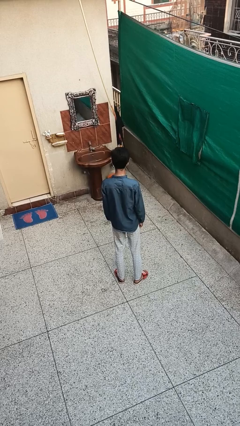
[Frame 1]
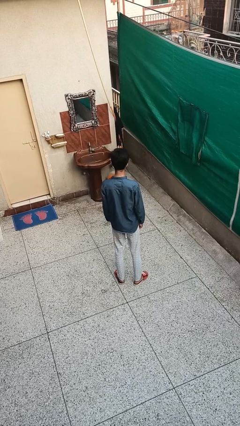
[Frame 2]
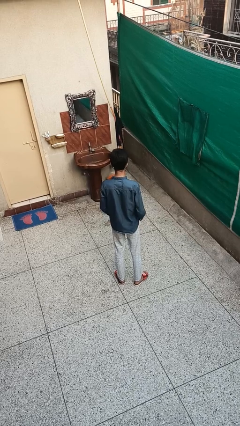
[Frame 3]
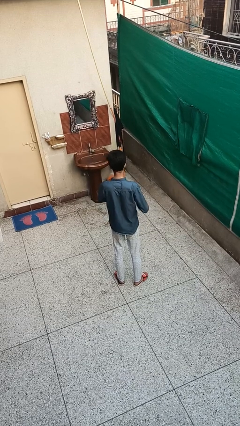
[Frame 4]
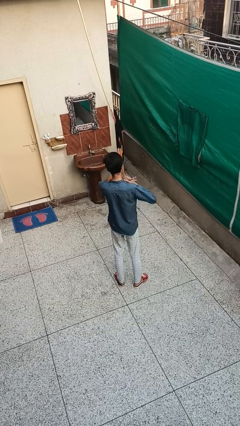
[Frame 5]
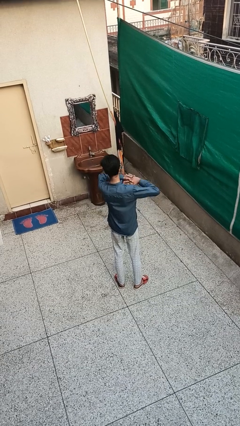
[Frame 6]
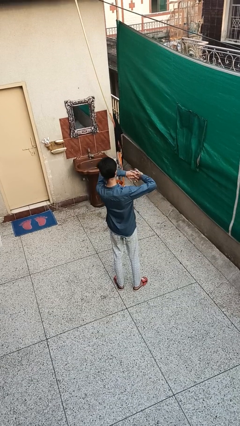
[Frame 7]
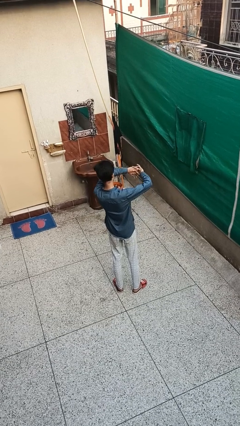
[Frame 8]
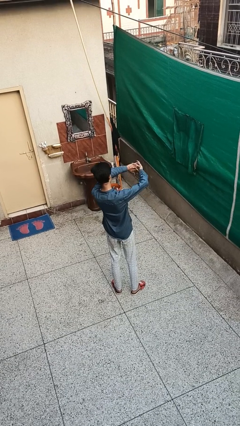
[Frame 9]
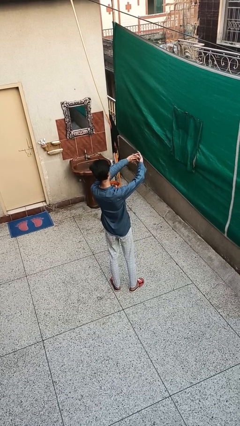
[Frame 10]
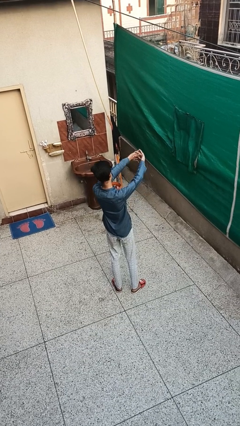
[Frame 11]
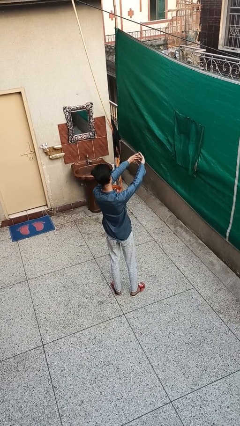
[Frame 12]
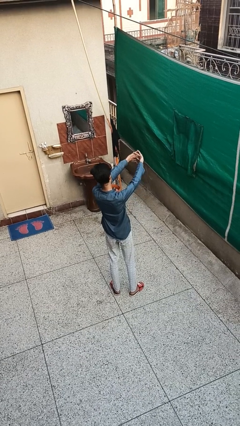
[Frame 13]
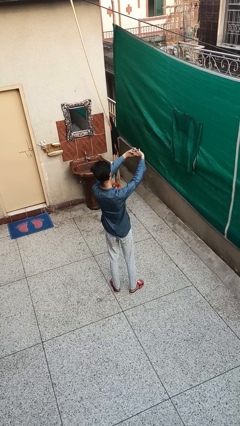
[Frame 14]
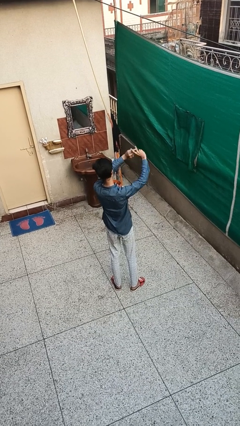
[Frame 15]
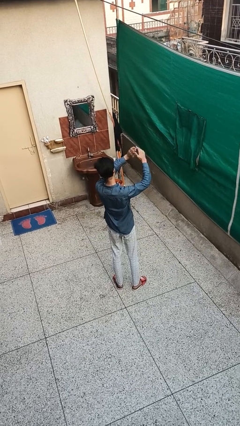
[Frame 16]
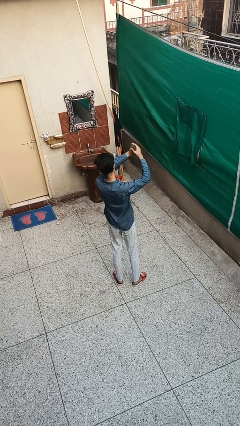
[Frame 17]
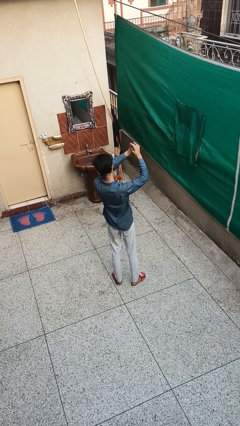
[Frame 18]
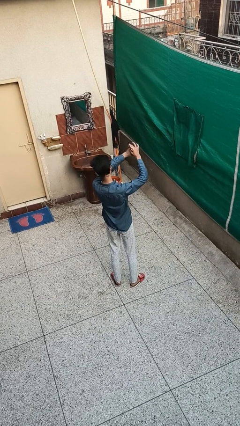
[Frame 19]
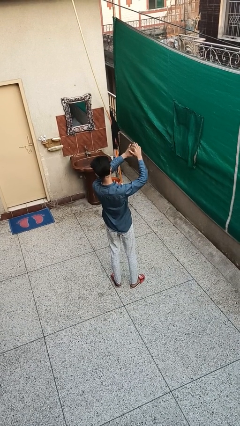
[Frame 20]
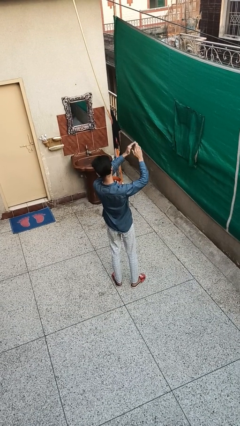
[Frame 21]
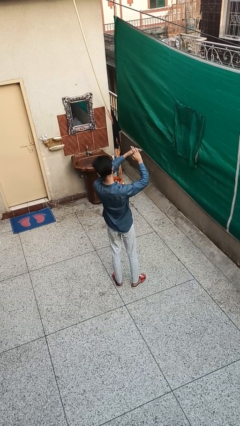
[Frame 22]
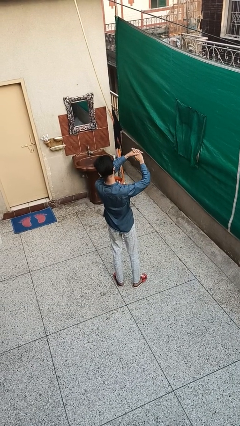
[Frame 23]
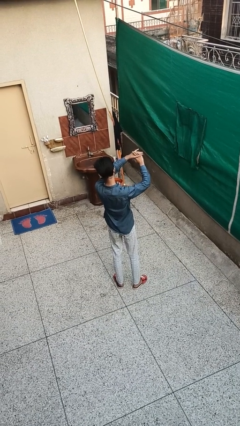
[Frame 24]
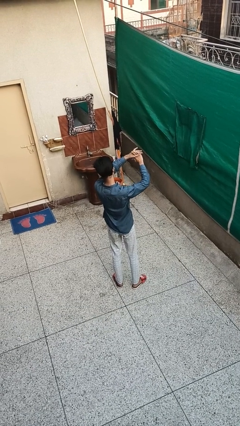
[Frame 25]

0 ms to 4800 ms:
person cracks knuckles

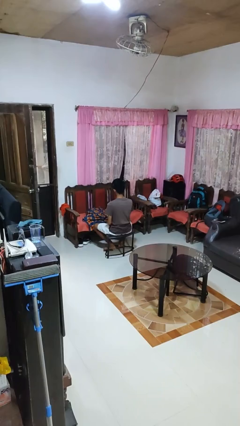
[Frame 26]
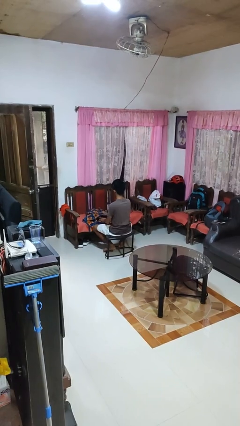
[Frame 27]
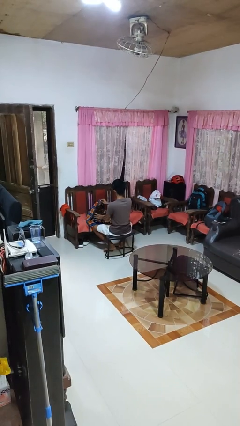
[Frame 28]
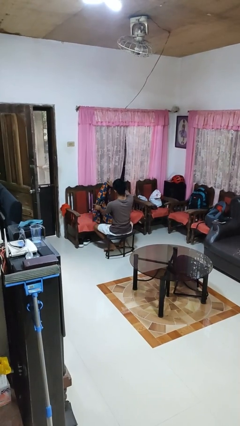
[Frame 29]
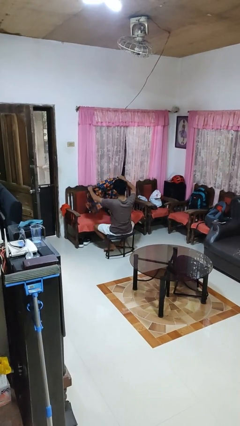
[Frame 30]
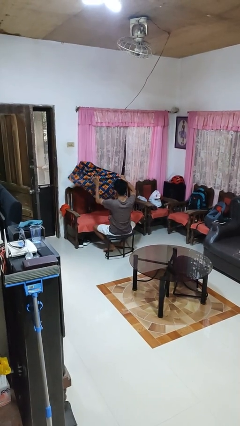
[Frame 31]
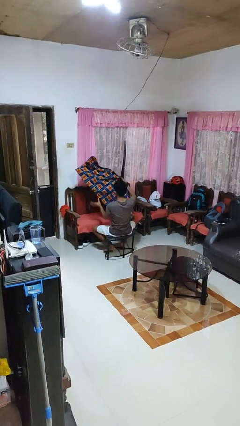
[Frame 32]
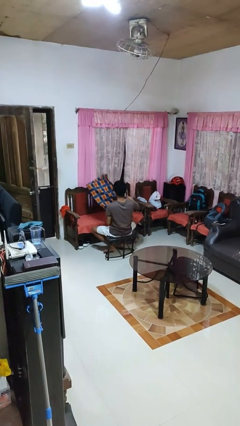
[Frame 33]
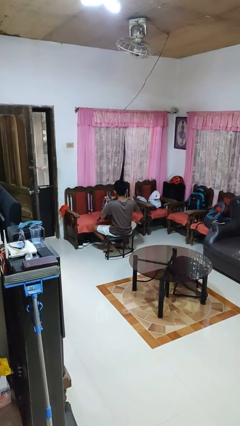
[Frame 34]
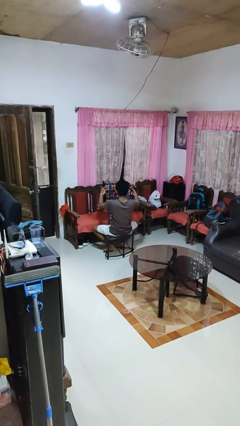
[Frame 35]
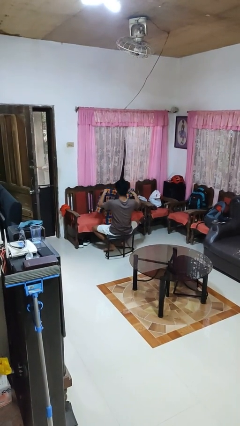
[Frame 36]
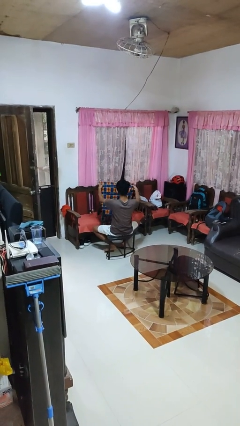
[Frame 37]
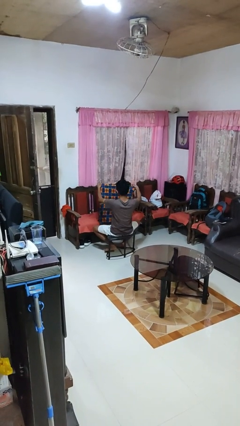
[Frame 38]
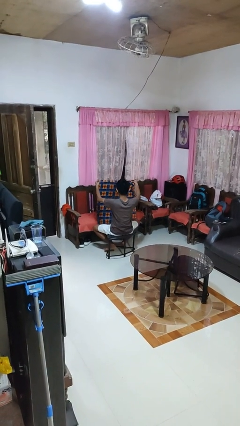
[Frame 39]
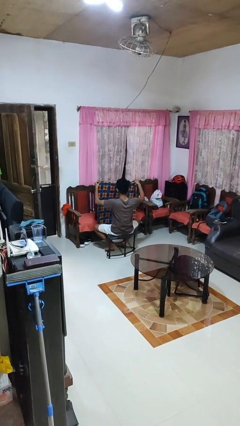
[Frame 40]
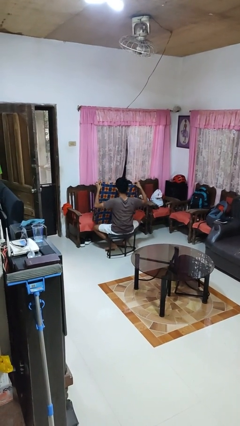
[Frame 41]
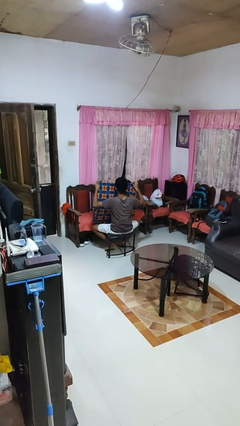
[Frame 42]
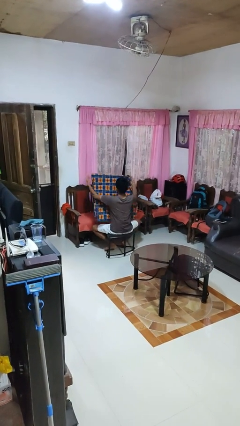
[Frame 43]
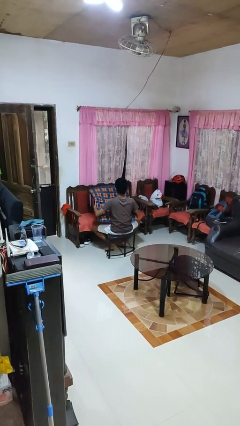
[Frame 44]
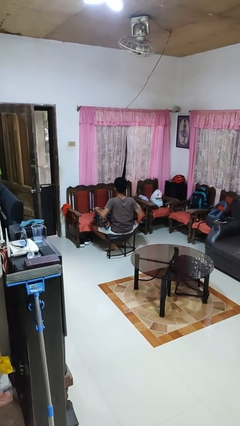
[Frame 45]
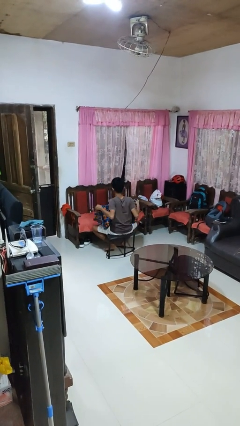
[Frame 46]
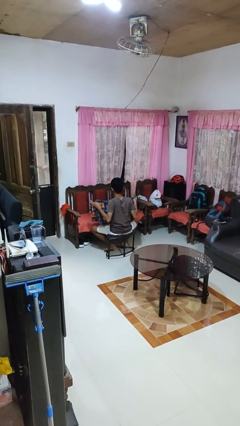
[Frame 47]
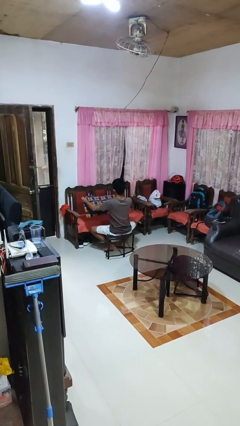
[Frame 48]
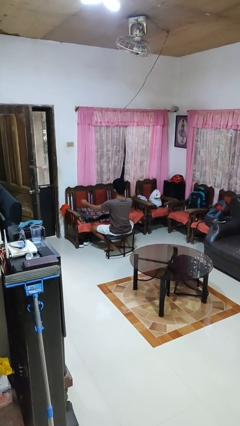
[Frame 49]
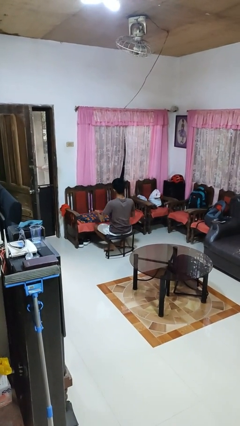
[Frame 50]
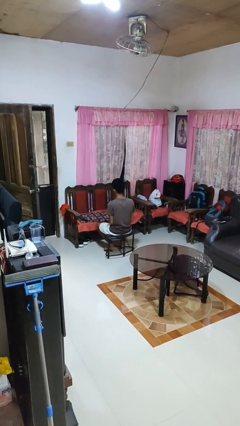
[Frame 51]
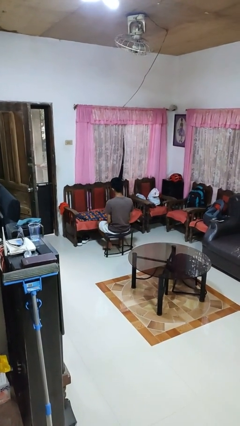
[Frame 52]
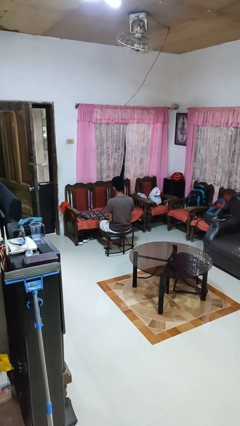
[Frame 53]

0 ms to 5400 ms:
person folds blanket

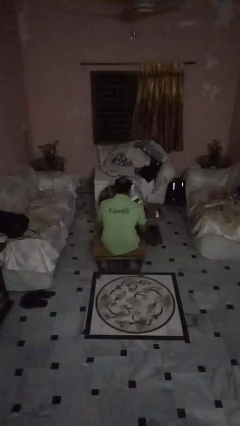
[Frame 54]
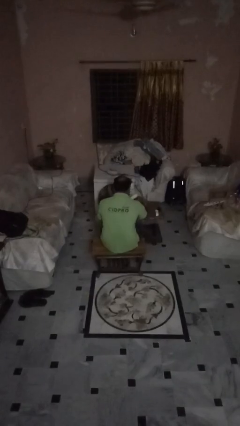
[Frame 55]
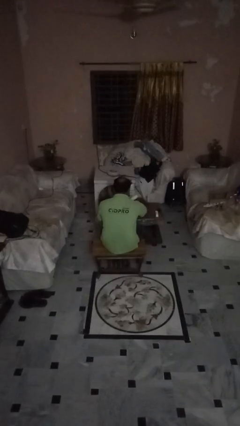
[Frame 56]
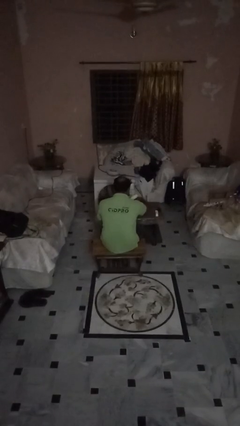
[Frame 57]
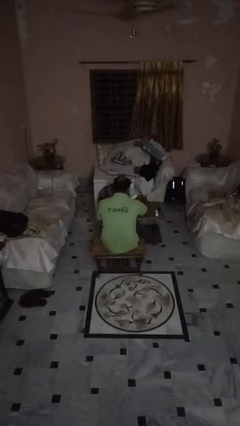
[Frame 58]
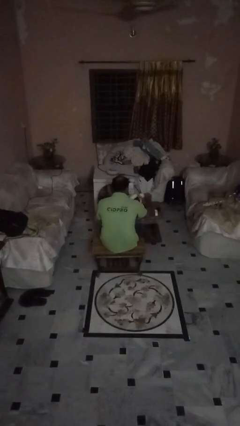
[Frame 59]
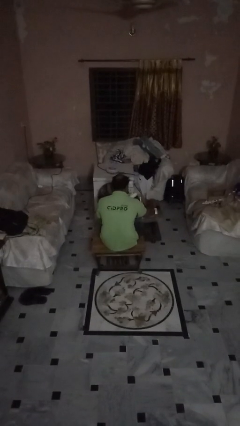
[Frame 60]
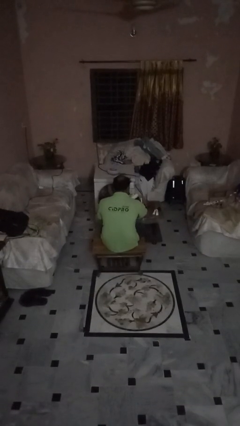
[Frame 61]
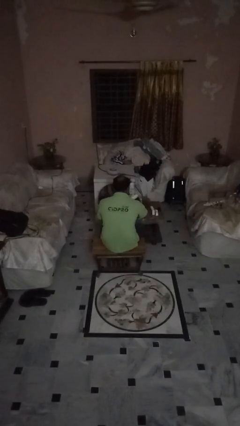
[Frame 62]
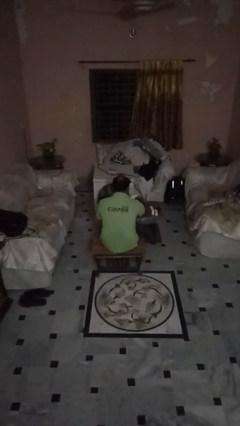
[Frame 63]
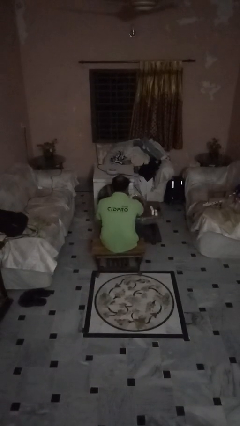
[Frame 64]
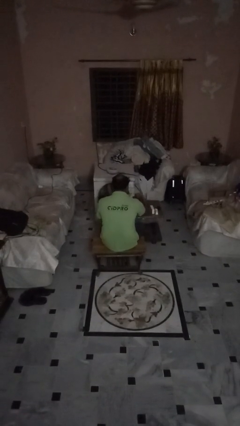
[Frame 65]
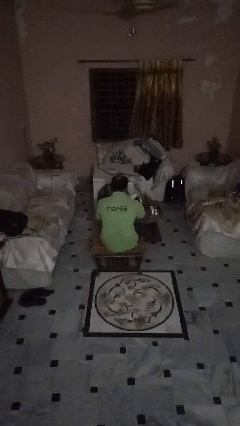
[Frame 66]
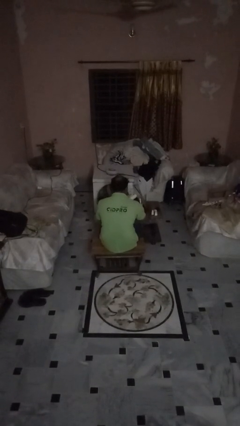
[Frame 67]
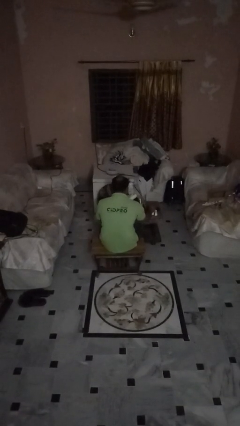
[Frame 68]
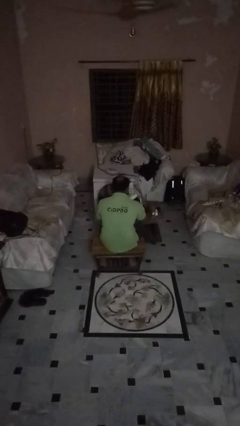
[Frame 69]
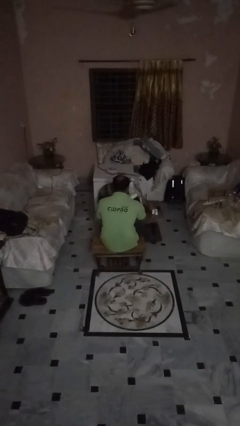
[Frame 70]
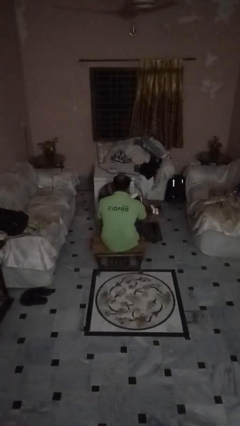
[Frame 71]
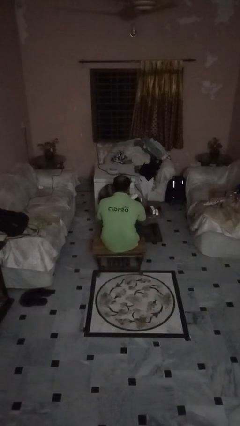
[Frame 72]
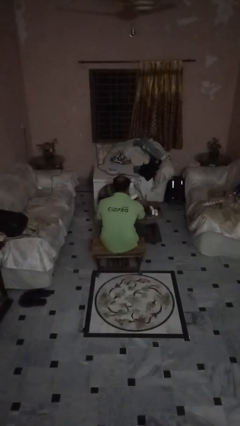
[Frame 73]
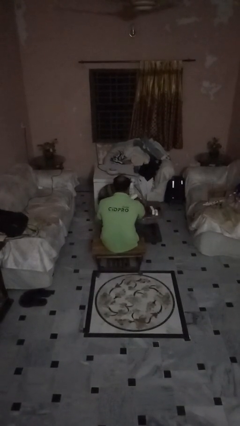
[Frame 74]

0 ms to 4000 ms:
person unloads box onto table

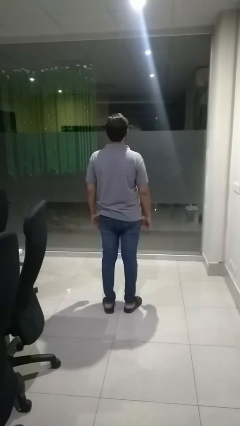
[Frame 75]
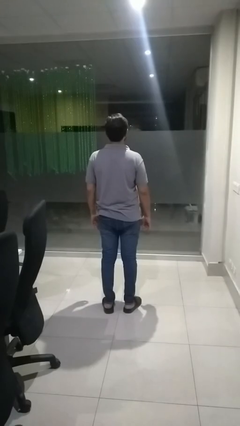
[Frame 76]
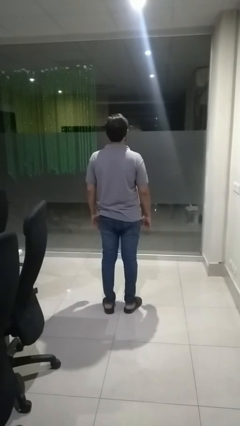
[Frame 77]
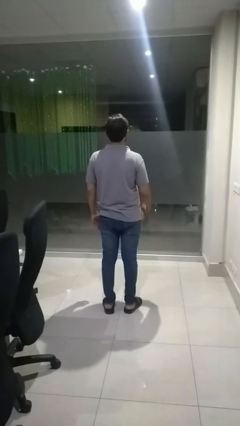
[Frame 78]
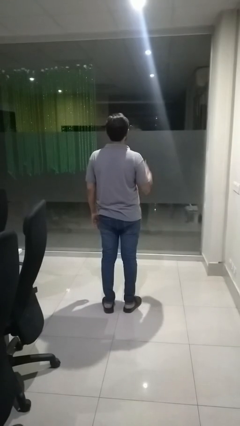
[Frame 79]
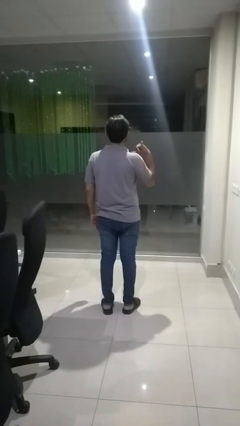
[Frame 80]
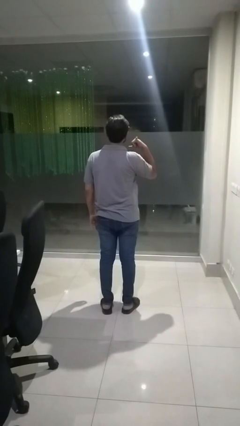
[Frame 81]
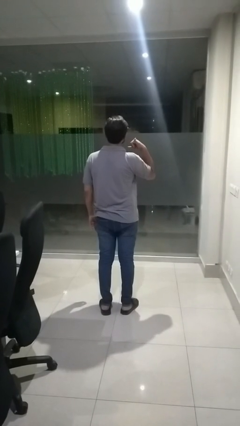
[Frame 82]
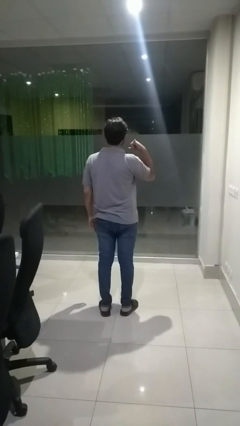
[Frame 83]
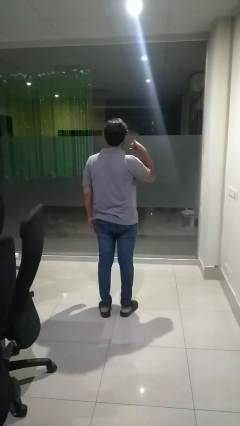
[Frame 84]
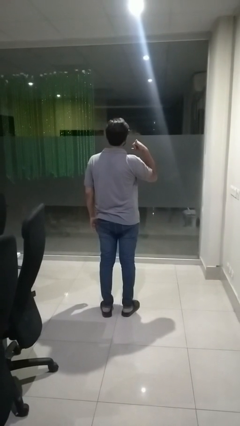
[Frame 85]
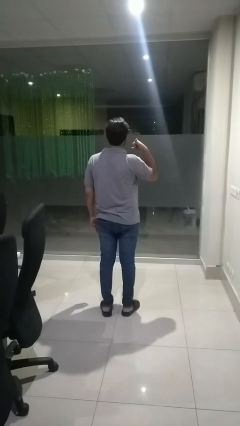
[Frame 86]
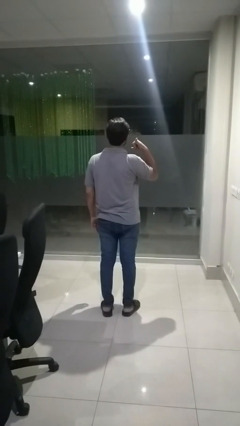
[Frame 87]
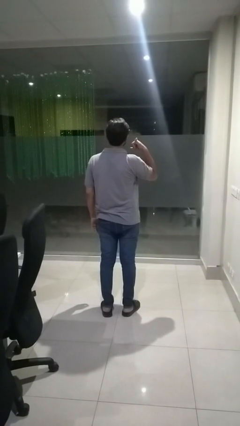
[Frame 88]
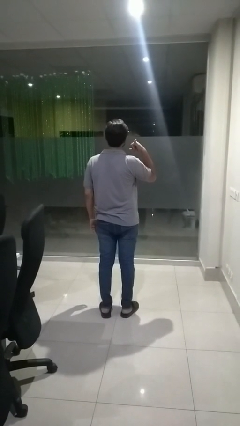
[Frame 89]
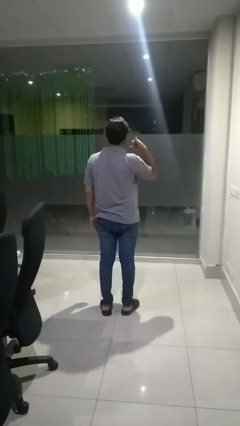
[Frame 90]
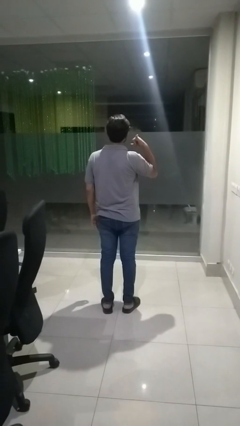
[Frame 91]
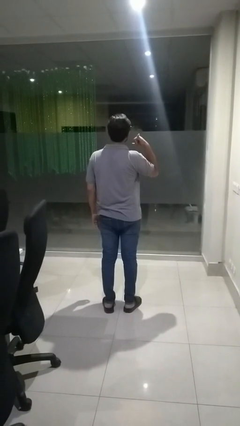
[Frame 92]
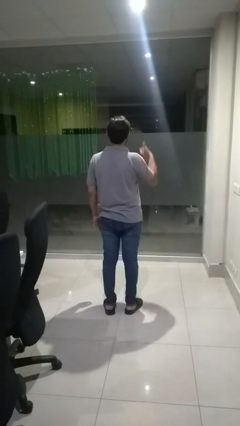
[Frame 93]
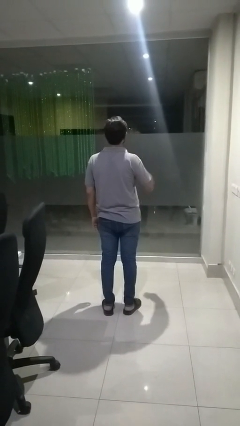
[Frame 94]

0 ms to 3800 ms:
person gestures call me
